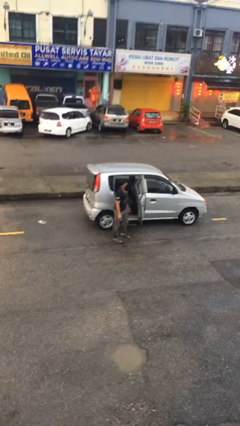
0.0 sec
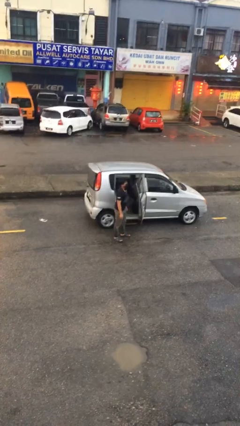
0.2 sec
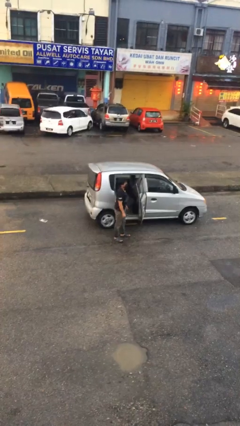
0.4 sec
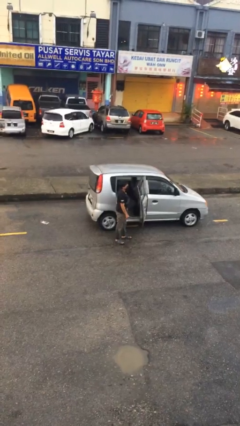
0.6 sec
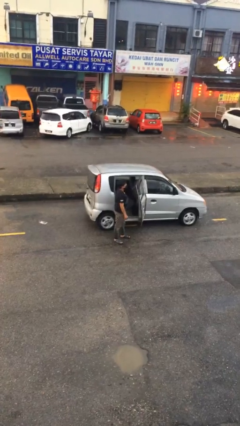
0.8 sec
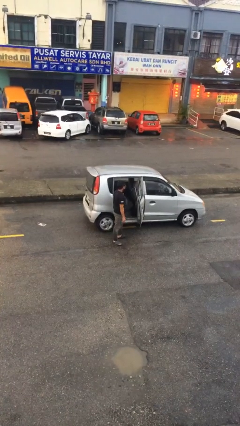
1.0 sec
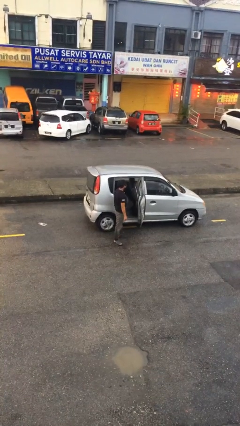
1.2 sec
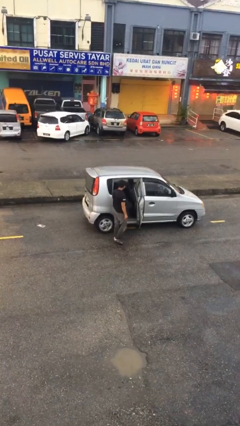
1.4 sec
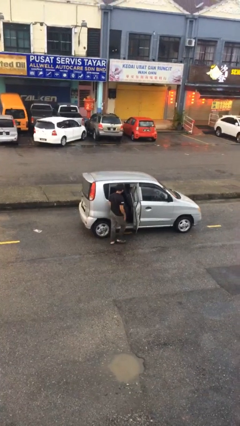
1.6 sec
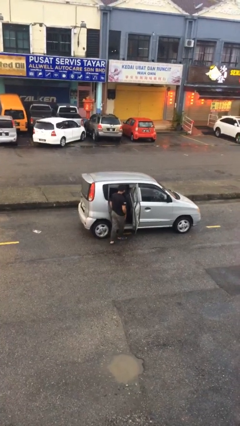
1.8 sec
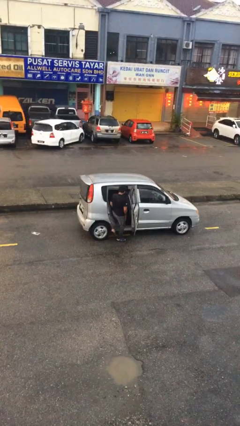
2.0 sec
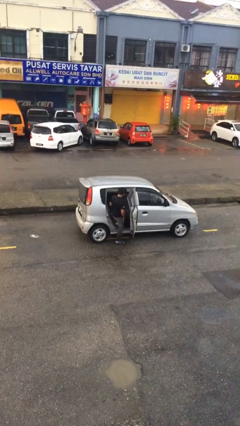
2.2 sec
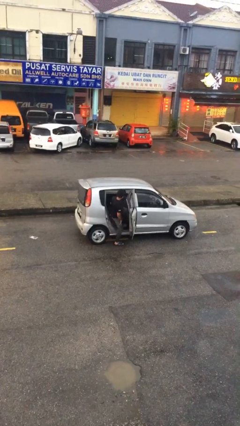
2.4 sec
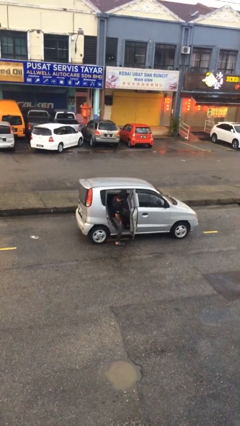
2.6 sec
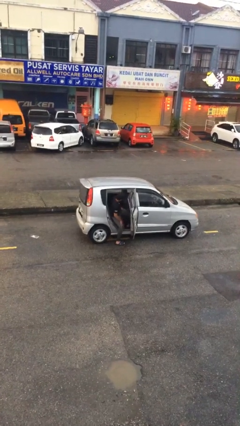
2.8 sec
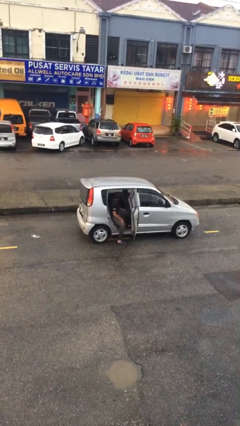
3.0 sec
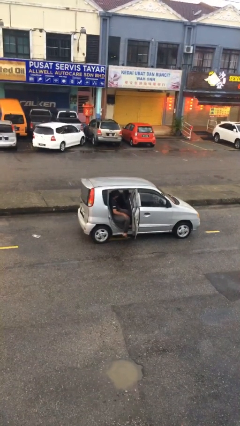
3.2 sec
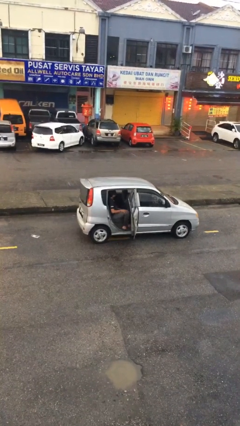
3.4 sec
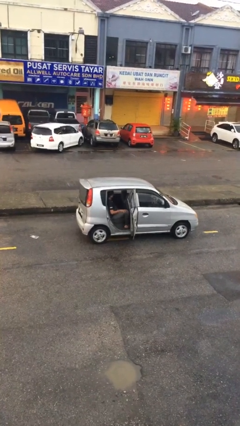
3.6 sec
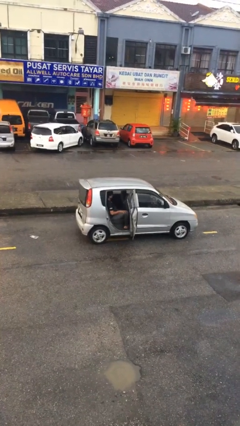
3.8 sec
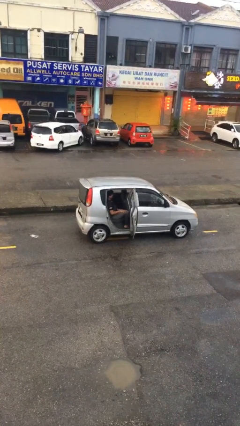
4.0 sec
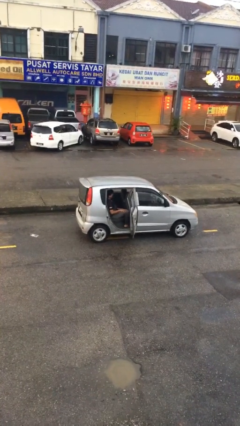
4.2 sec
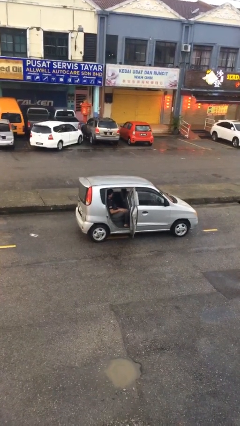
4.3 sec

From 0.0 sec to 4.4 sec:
person enters car

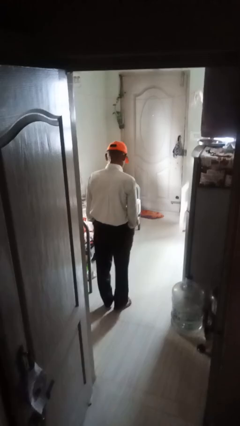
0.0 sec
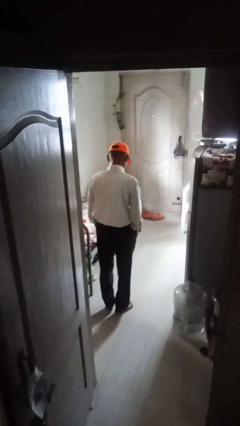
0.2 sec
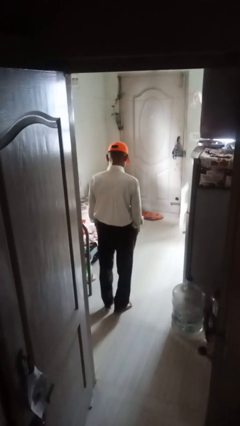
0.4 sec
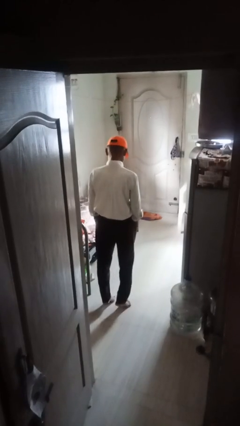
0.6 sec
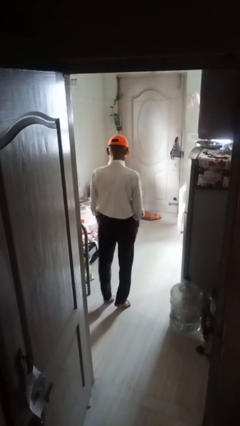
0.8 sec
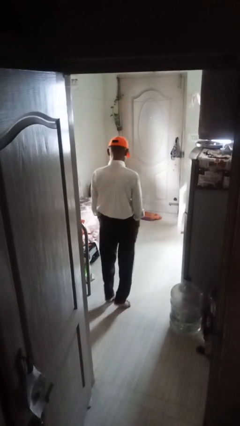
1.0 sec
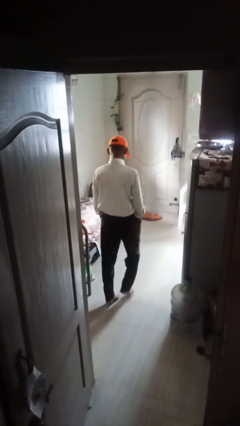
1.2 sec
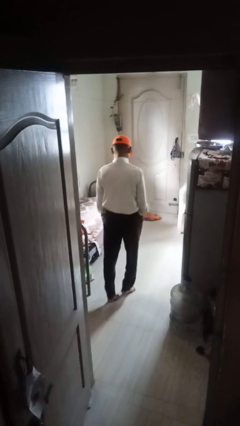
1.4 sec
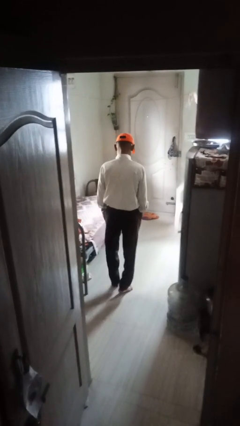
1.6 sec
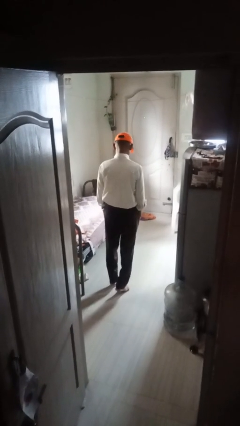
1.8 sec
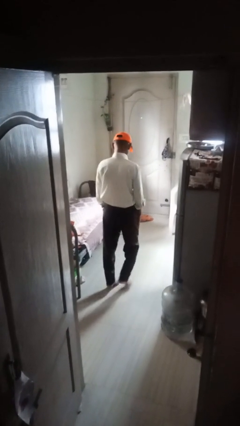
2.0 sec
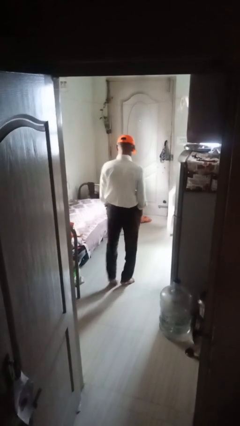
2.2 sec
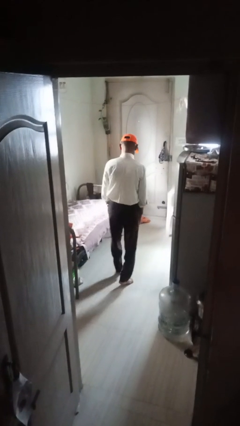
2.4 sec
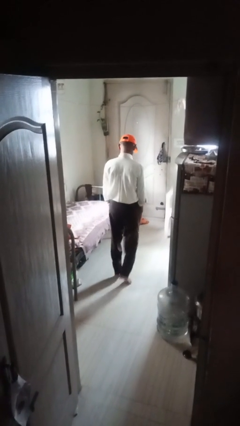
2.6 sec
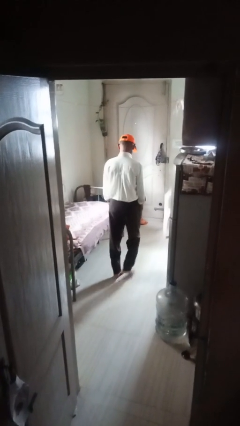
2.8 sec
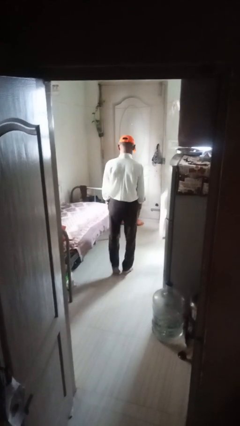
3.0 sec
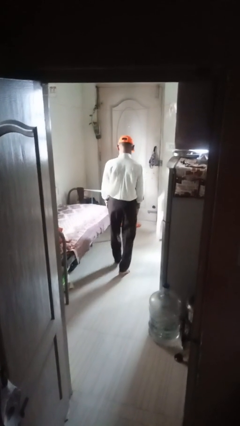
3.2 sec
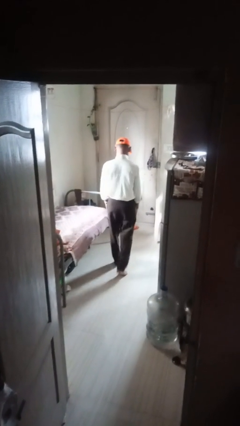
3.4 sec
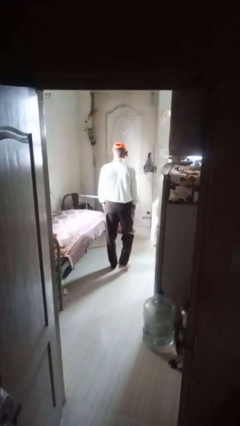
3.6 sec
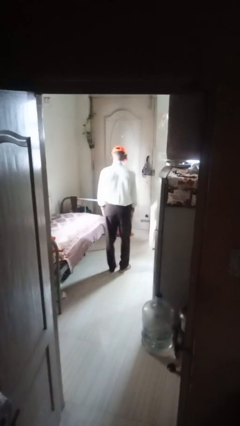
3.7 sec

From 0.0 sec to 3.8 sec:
person walks tiptoe

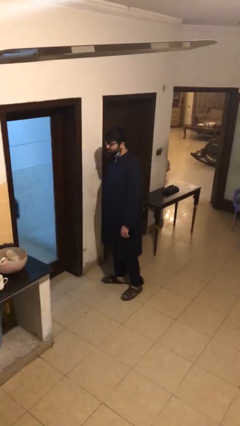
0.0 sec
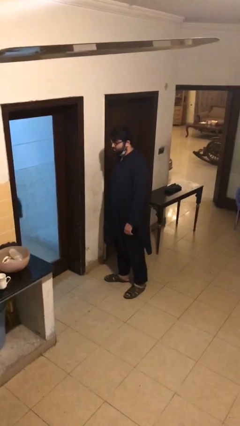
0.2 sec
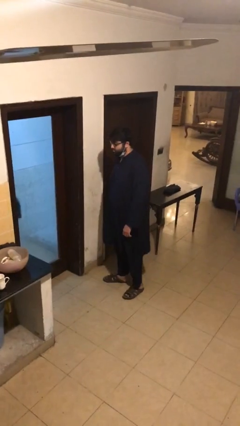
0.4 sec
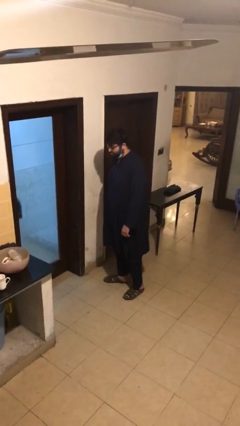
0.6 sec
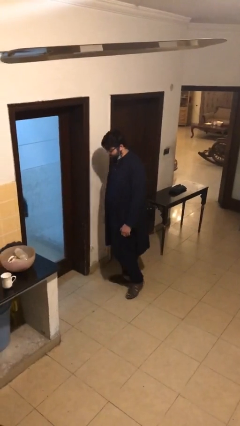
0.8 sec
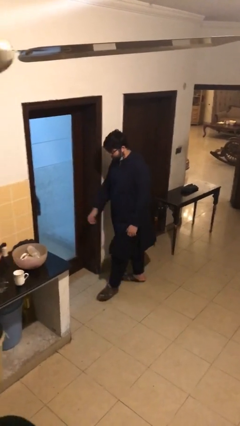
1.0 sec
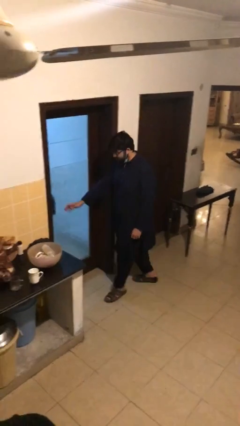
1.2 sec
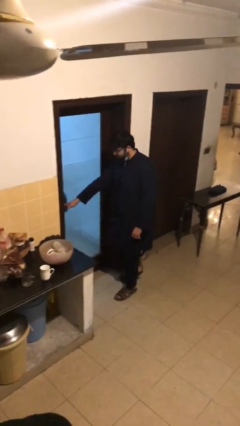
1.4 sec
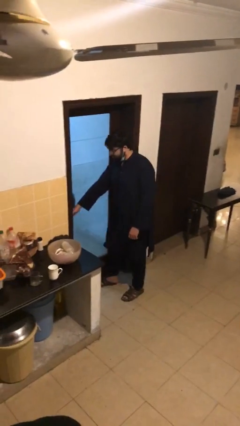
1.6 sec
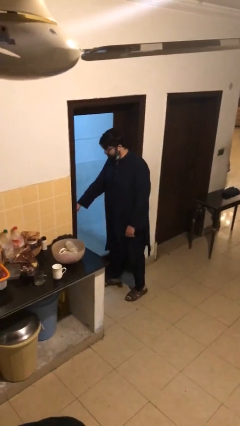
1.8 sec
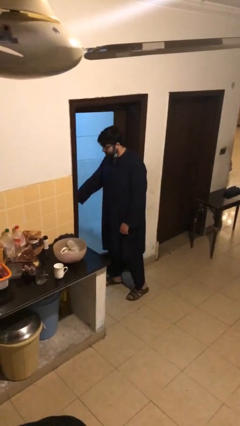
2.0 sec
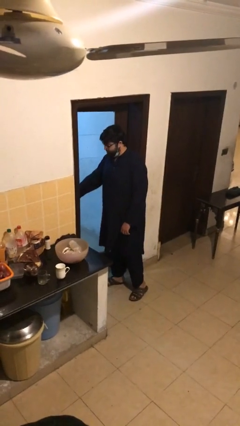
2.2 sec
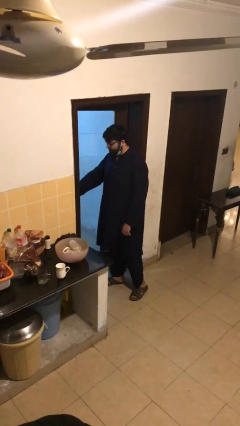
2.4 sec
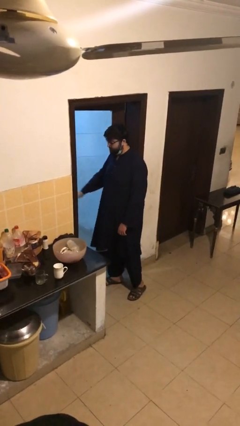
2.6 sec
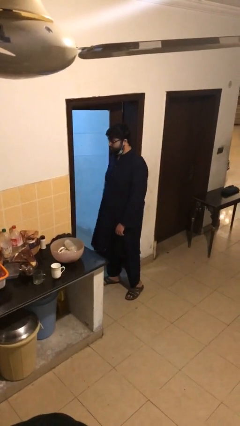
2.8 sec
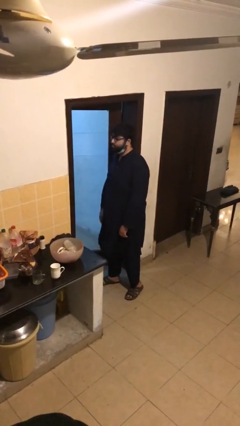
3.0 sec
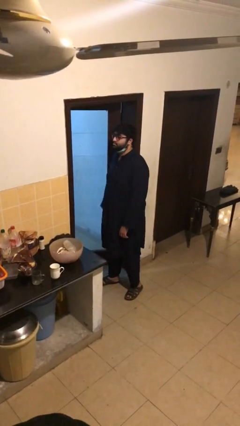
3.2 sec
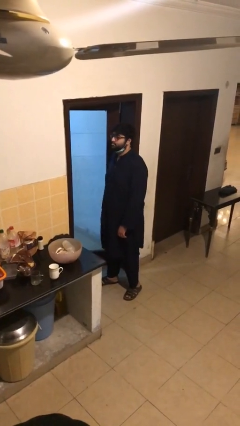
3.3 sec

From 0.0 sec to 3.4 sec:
person opens facility door

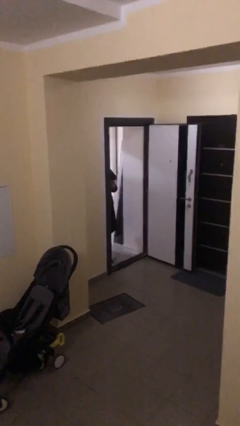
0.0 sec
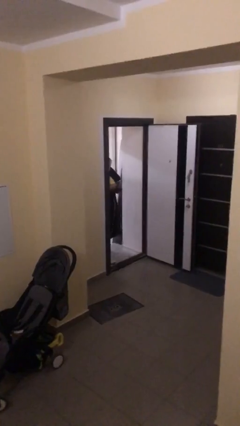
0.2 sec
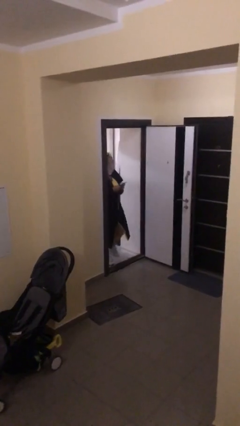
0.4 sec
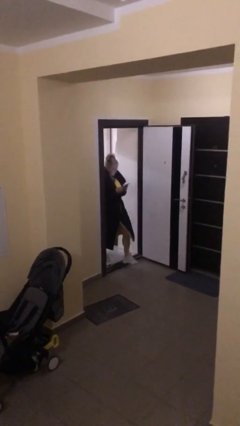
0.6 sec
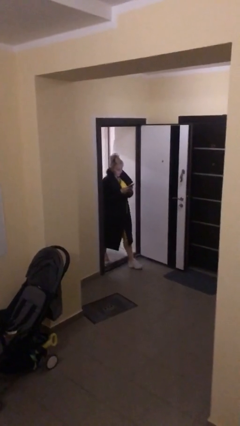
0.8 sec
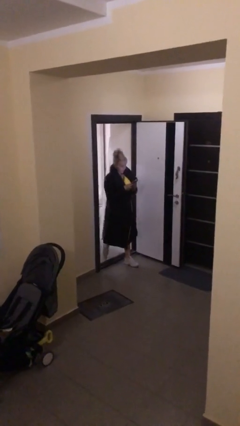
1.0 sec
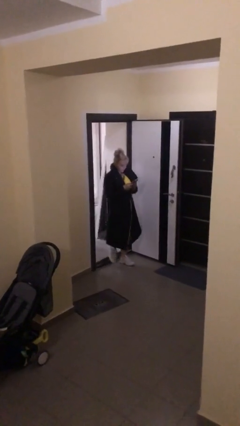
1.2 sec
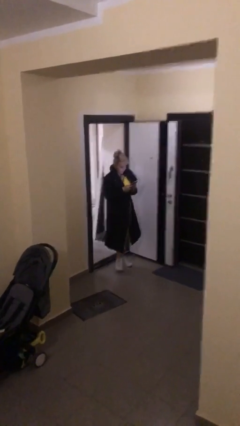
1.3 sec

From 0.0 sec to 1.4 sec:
person enters scene through structure

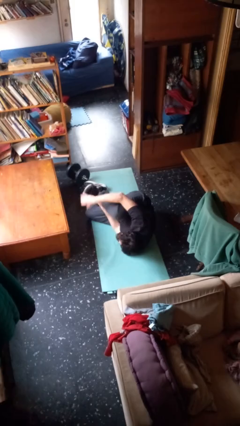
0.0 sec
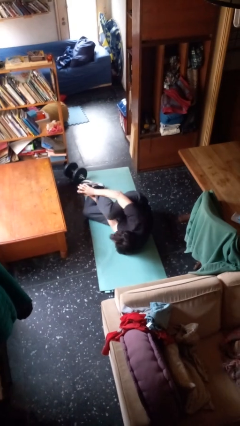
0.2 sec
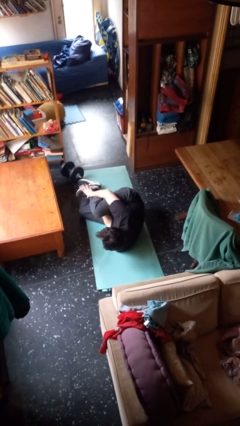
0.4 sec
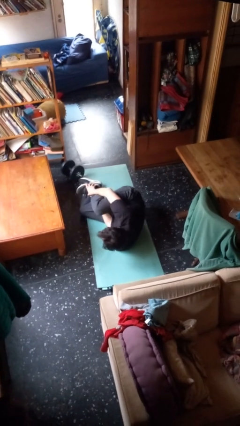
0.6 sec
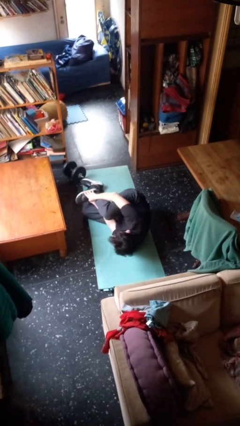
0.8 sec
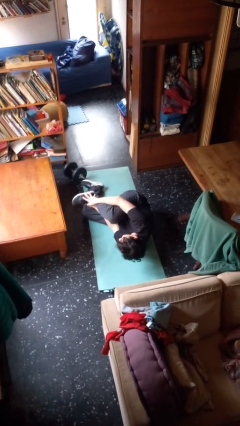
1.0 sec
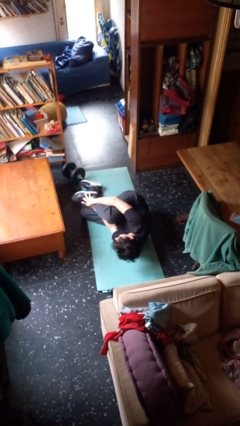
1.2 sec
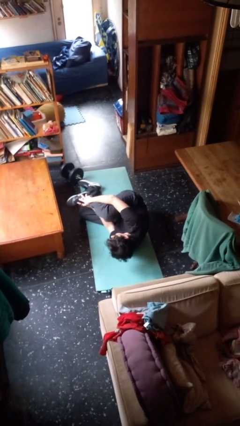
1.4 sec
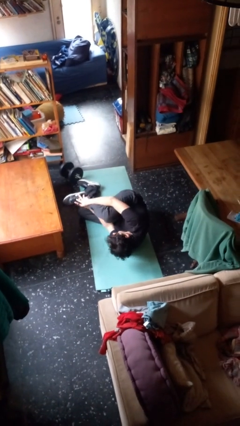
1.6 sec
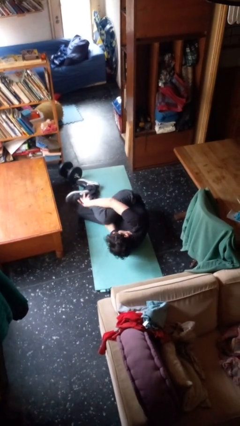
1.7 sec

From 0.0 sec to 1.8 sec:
person lies down on floor

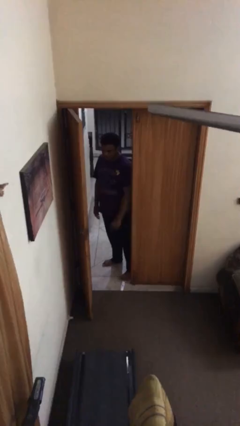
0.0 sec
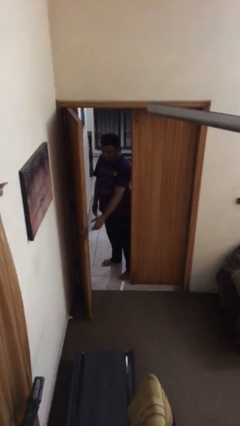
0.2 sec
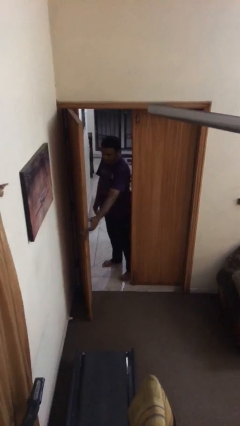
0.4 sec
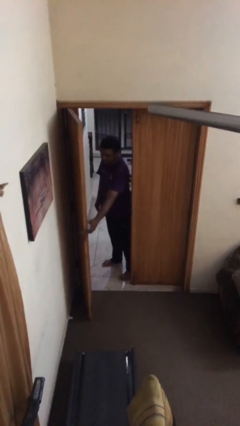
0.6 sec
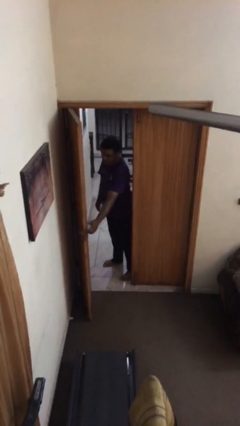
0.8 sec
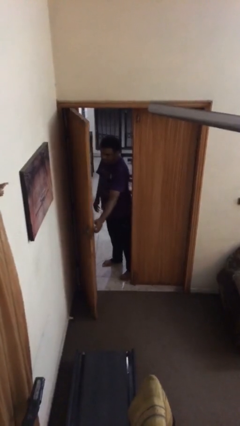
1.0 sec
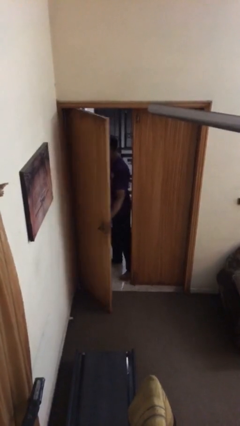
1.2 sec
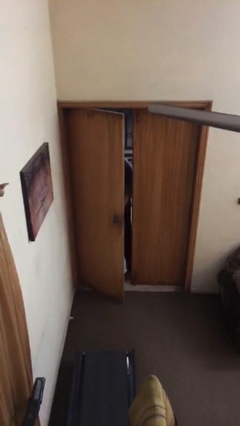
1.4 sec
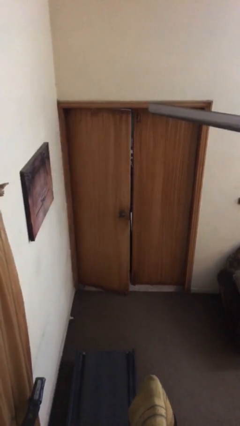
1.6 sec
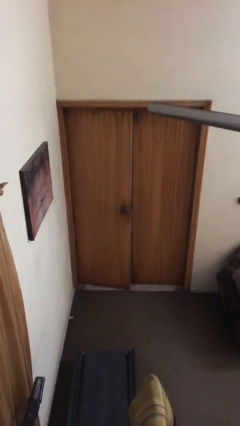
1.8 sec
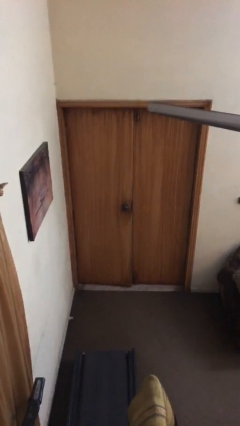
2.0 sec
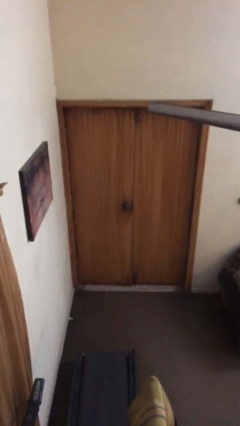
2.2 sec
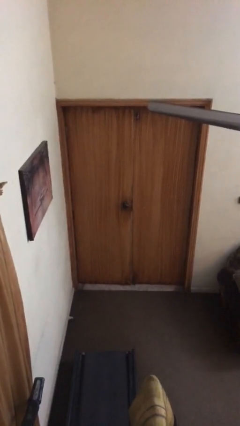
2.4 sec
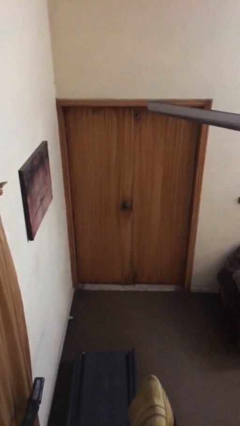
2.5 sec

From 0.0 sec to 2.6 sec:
person closes facility door
